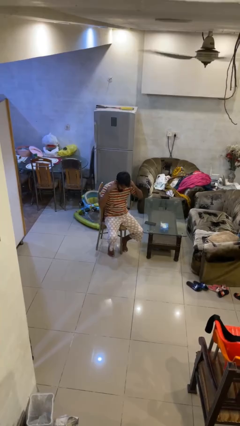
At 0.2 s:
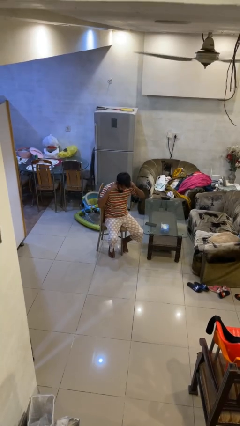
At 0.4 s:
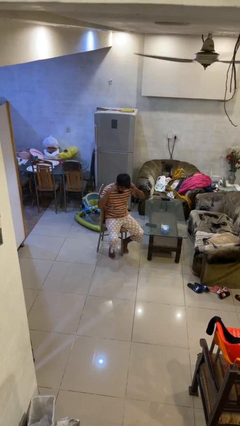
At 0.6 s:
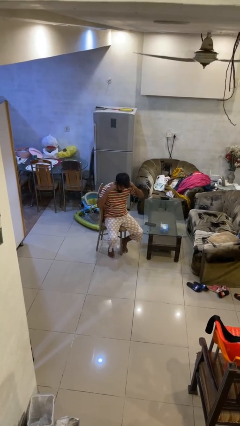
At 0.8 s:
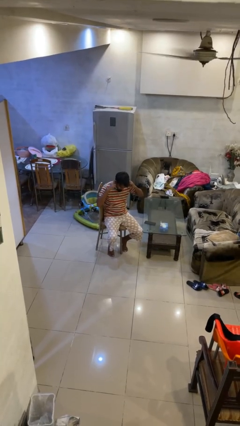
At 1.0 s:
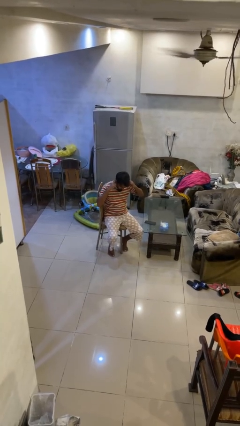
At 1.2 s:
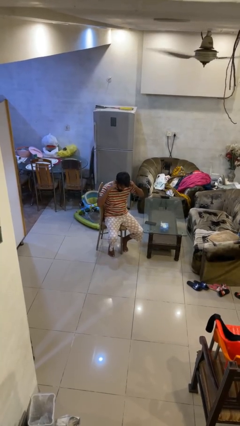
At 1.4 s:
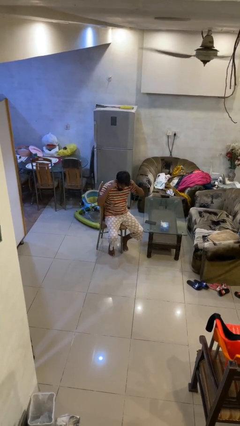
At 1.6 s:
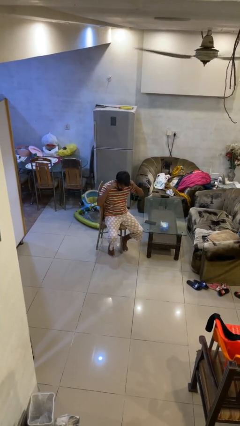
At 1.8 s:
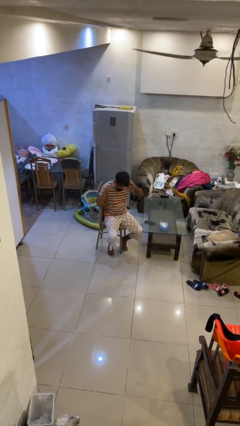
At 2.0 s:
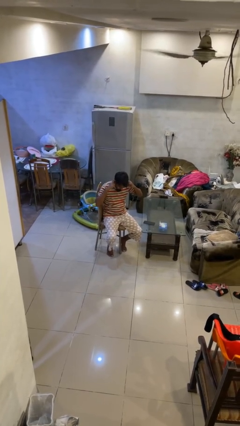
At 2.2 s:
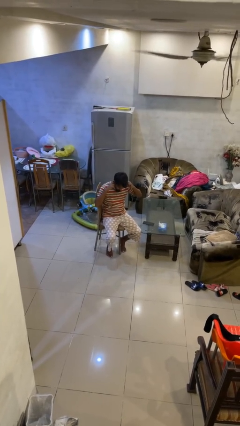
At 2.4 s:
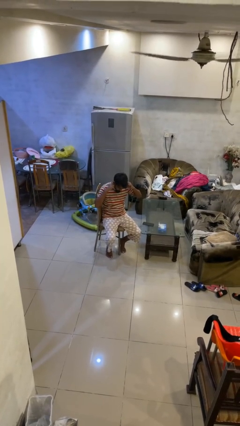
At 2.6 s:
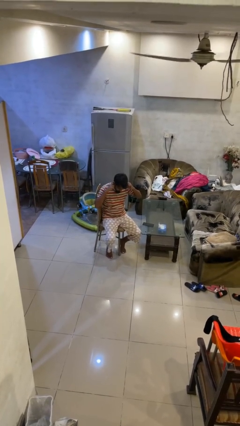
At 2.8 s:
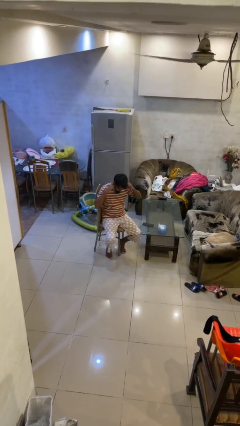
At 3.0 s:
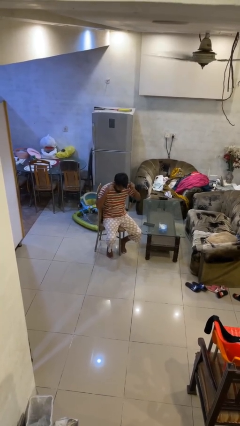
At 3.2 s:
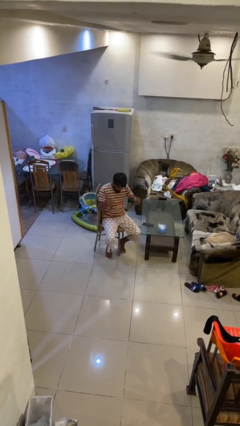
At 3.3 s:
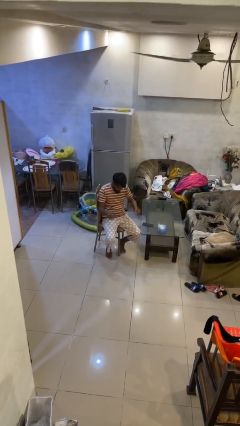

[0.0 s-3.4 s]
person puts fingers in ear

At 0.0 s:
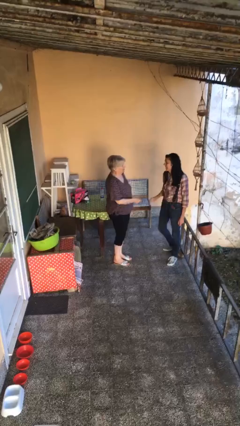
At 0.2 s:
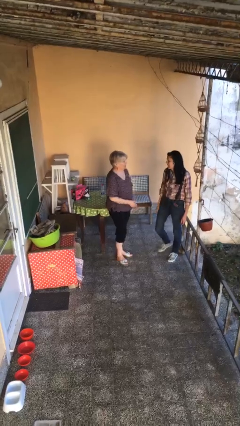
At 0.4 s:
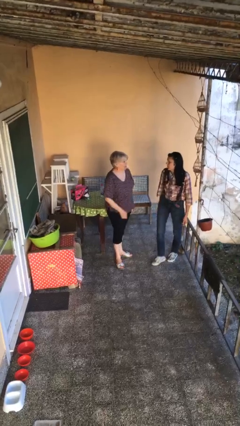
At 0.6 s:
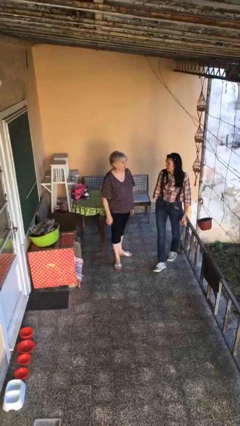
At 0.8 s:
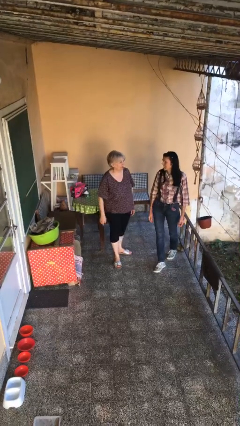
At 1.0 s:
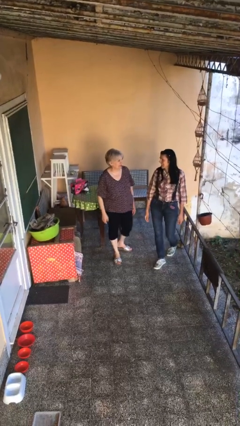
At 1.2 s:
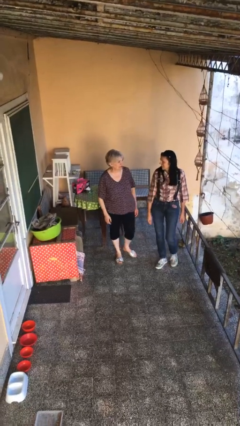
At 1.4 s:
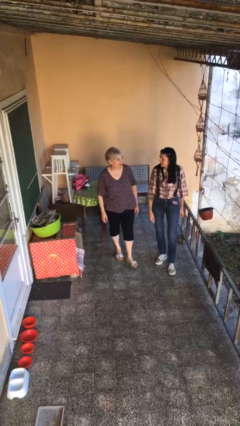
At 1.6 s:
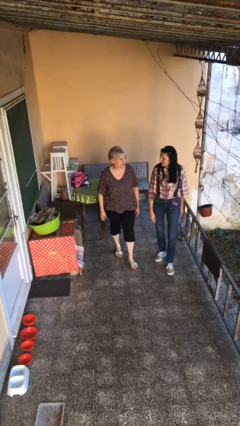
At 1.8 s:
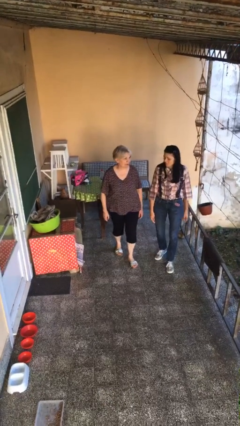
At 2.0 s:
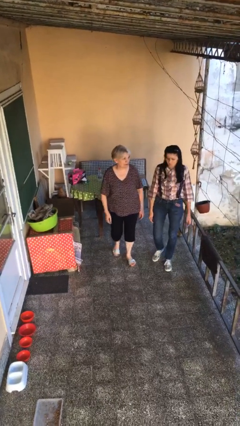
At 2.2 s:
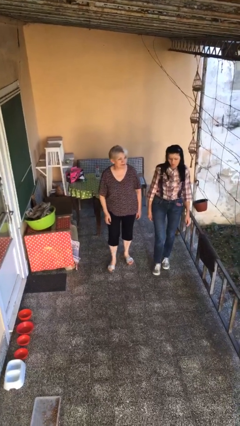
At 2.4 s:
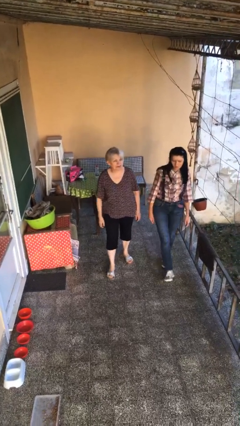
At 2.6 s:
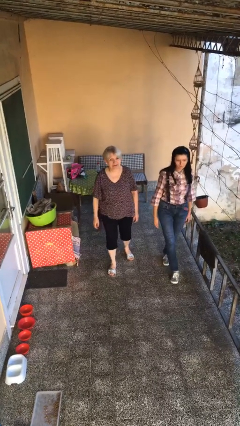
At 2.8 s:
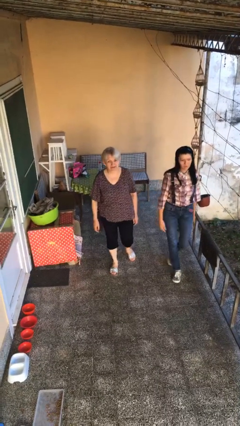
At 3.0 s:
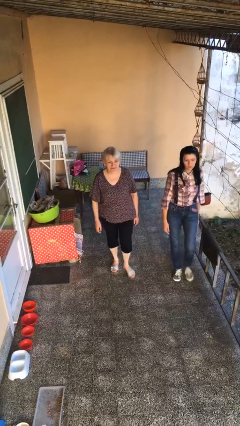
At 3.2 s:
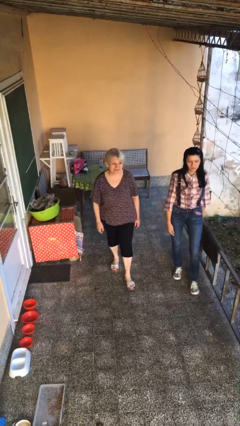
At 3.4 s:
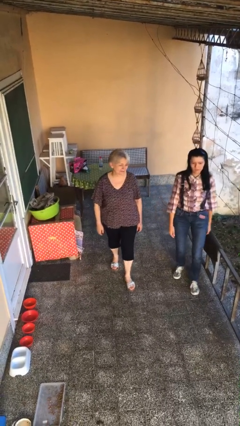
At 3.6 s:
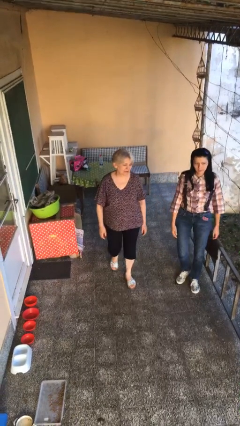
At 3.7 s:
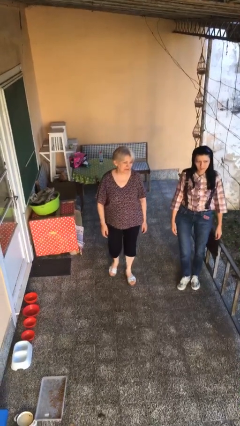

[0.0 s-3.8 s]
person talks to person

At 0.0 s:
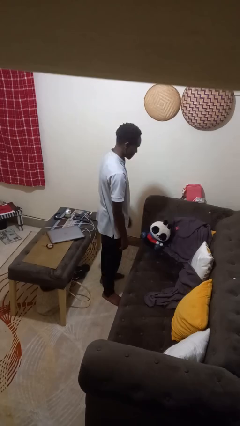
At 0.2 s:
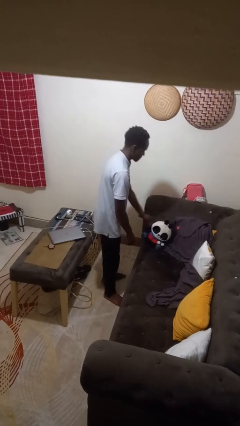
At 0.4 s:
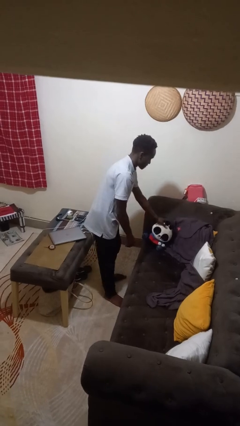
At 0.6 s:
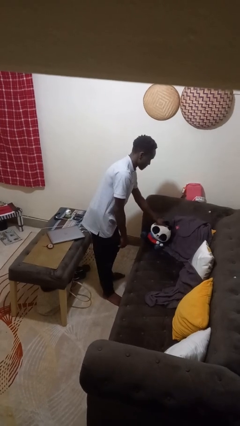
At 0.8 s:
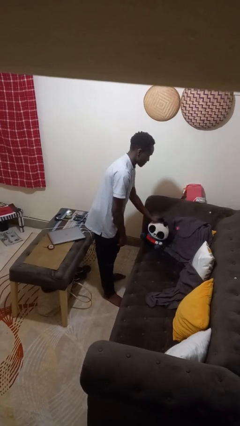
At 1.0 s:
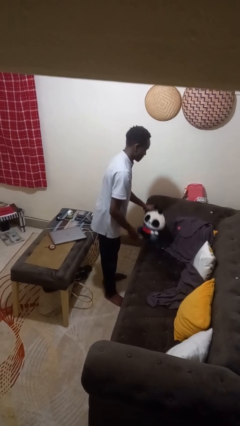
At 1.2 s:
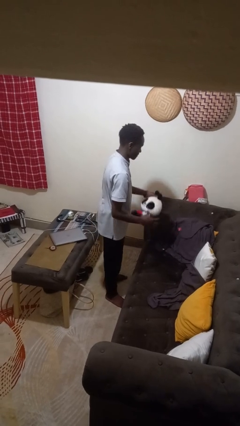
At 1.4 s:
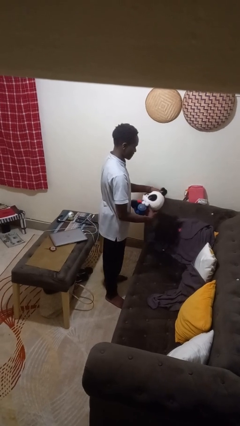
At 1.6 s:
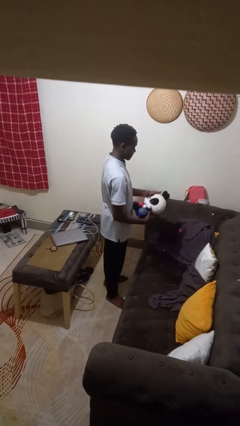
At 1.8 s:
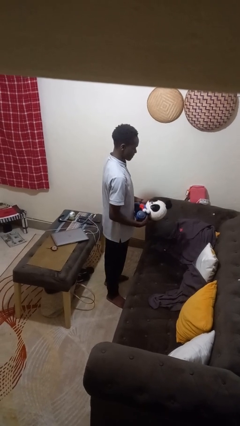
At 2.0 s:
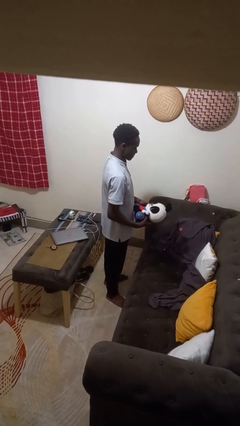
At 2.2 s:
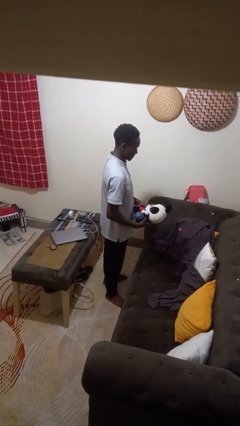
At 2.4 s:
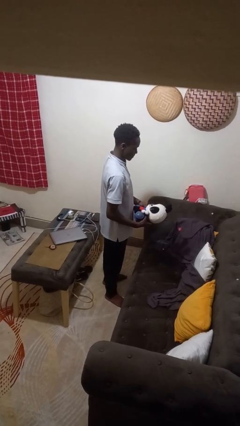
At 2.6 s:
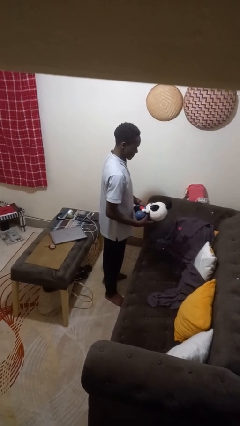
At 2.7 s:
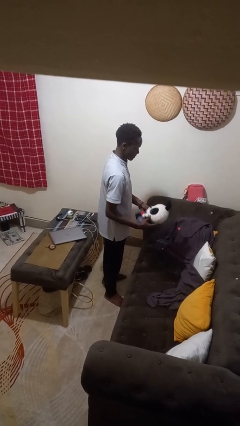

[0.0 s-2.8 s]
person picks up object from couch

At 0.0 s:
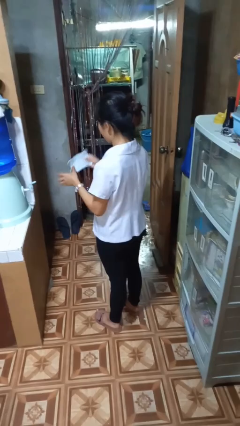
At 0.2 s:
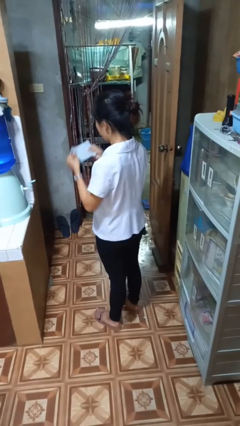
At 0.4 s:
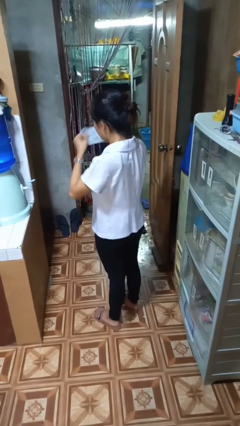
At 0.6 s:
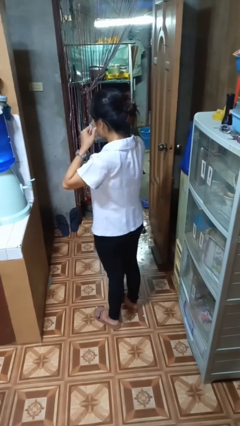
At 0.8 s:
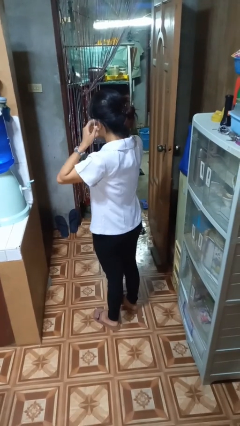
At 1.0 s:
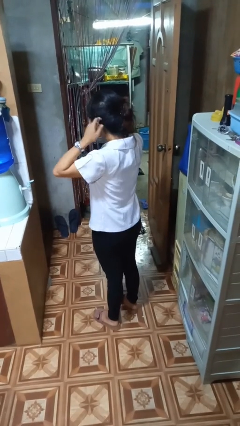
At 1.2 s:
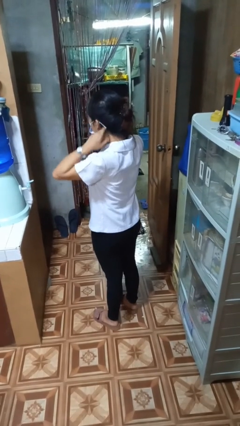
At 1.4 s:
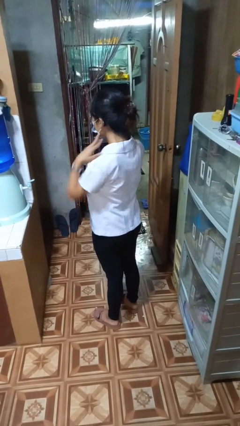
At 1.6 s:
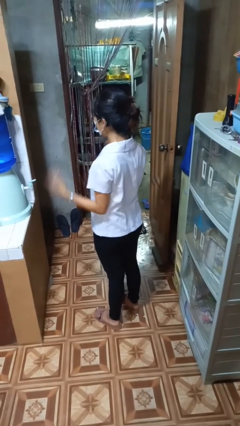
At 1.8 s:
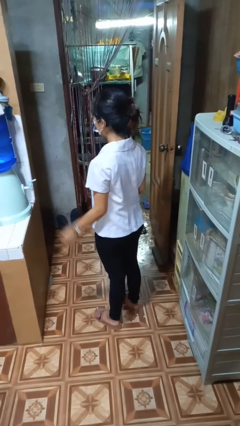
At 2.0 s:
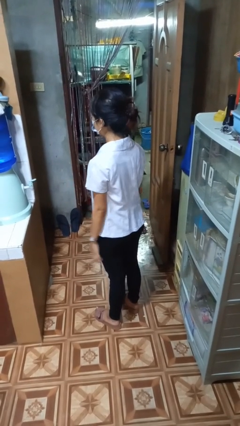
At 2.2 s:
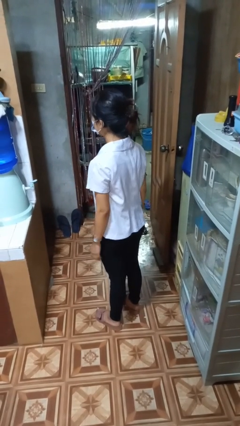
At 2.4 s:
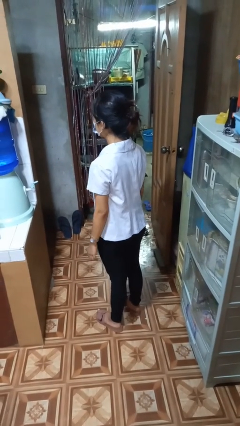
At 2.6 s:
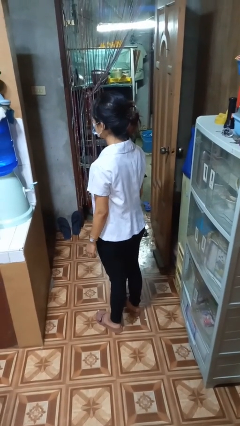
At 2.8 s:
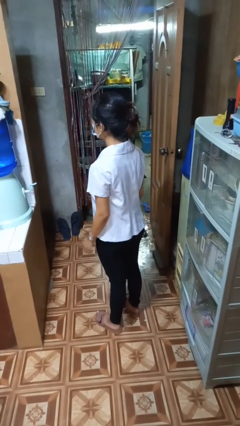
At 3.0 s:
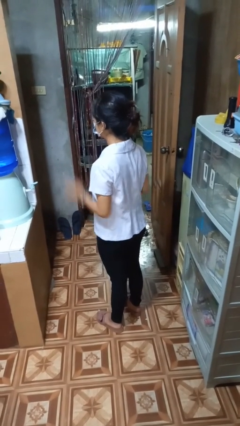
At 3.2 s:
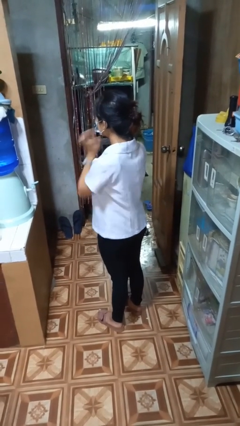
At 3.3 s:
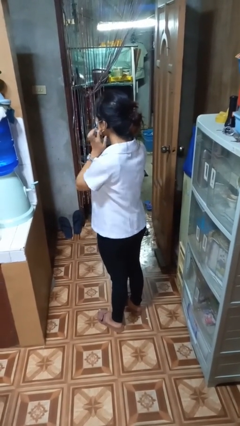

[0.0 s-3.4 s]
person puts on facemask

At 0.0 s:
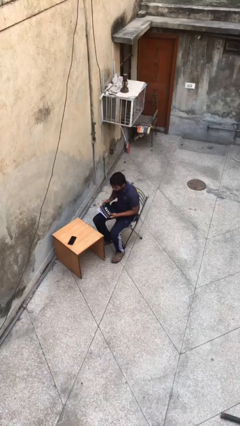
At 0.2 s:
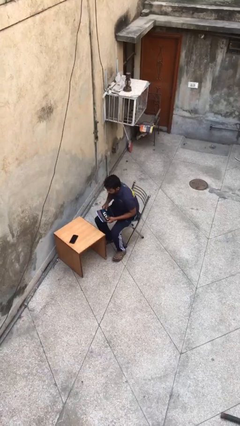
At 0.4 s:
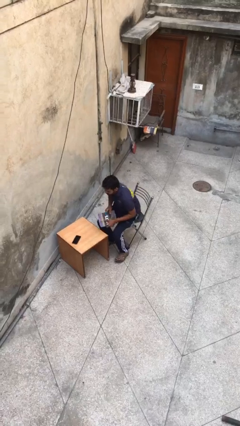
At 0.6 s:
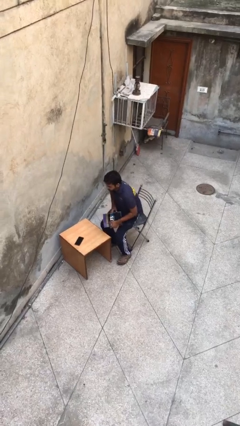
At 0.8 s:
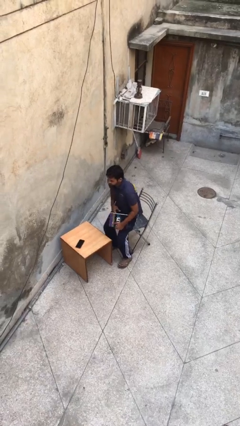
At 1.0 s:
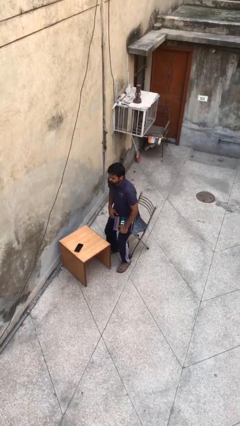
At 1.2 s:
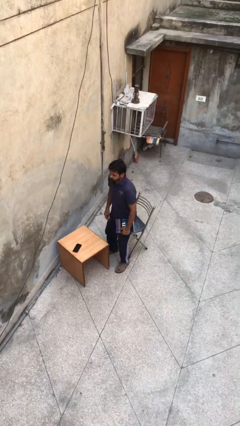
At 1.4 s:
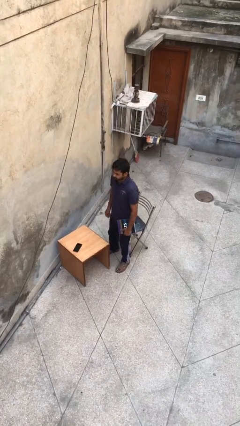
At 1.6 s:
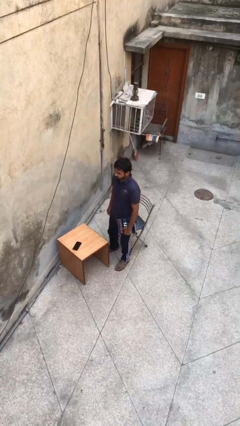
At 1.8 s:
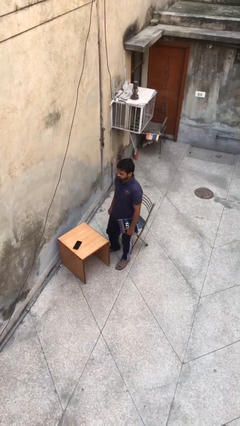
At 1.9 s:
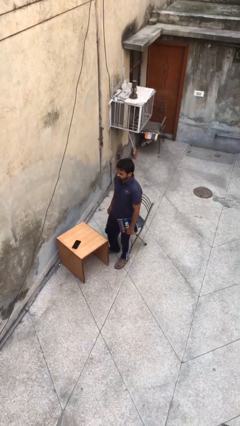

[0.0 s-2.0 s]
person stands up

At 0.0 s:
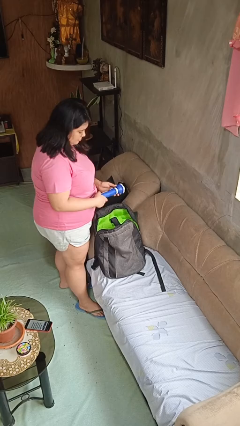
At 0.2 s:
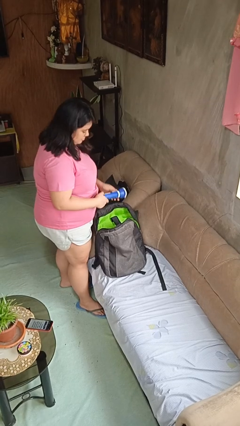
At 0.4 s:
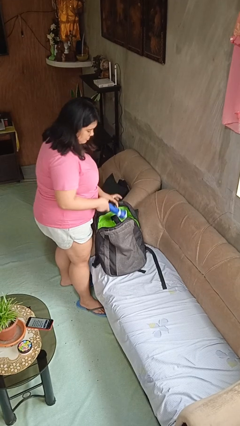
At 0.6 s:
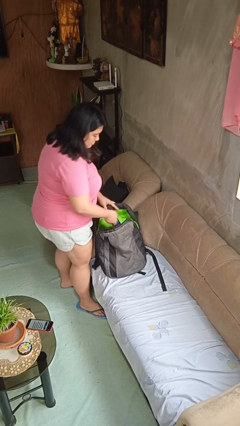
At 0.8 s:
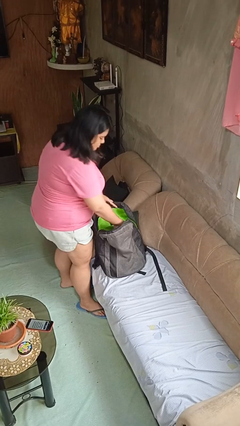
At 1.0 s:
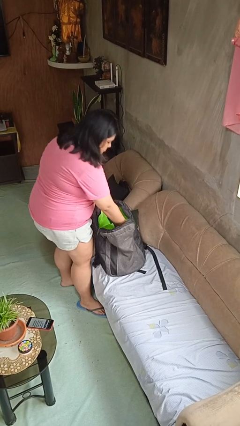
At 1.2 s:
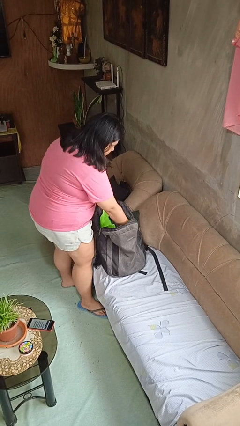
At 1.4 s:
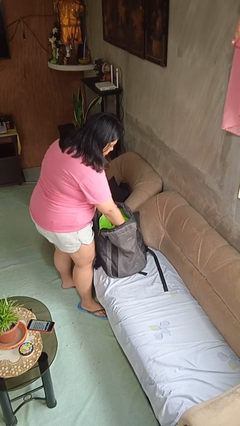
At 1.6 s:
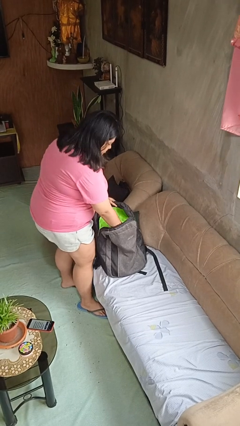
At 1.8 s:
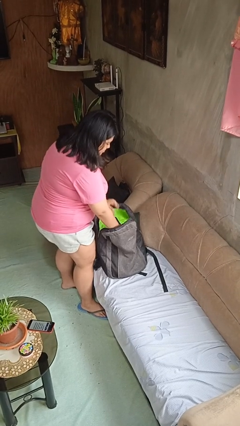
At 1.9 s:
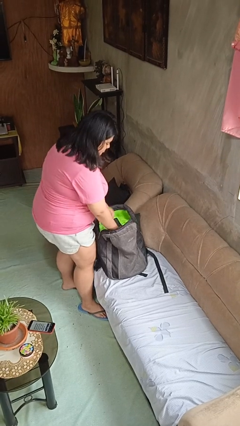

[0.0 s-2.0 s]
person puts object into backpack
